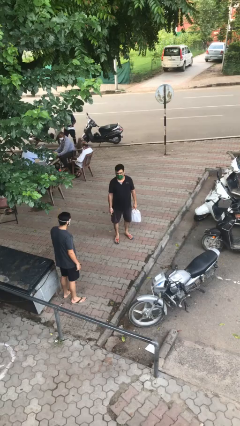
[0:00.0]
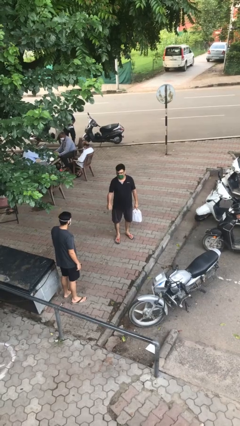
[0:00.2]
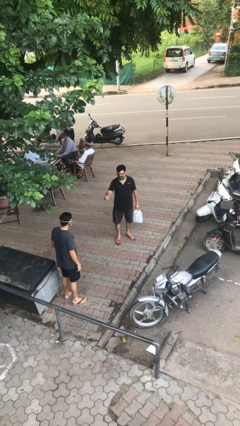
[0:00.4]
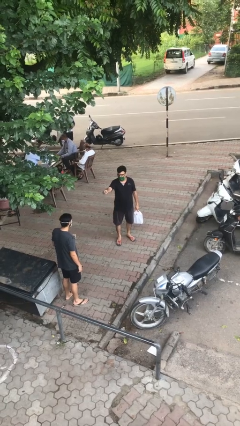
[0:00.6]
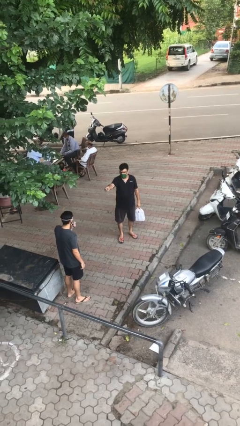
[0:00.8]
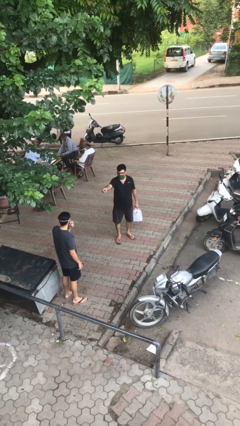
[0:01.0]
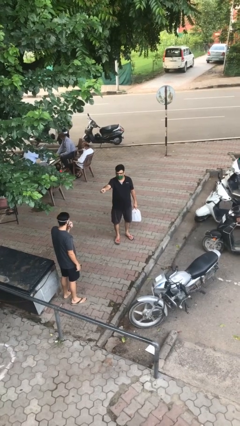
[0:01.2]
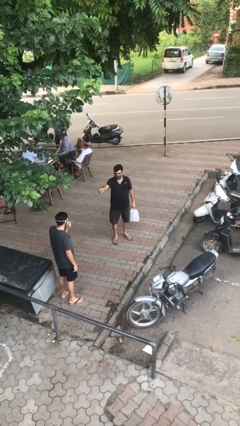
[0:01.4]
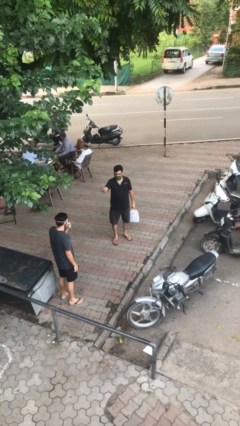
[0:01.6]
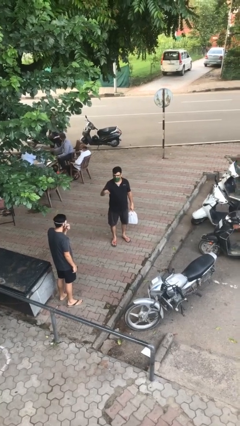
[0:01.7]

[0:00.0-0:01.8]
person points at person

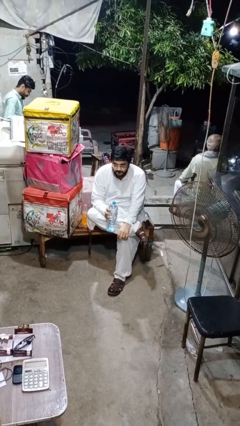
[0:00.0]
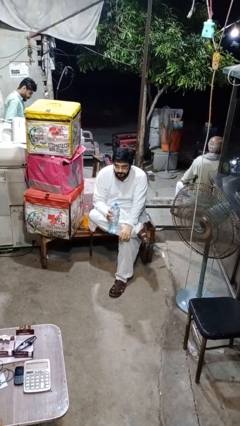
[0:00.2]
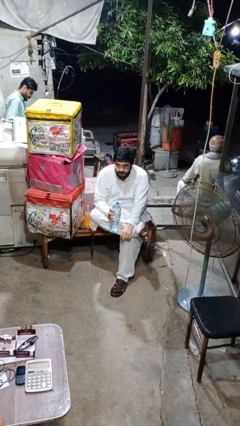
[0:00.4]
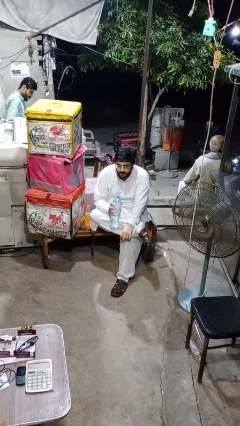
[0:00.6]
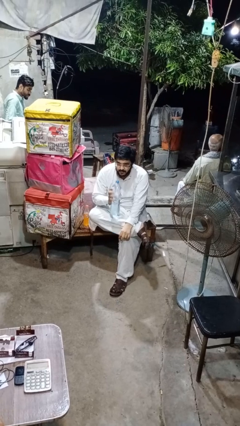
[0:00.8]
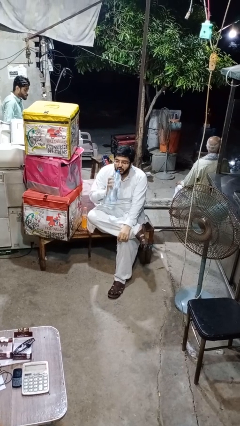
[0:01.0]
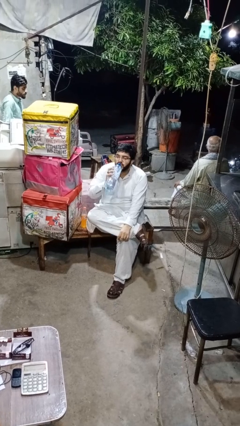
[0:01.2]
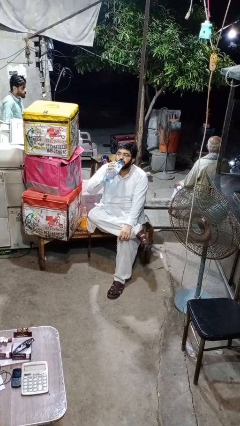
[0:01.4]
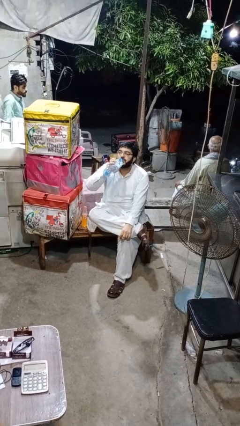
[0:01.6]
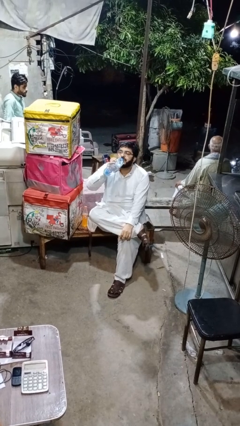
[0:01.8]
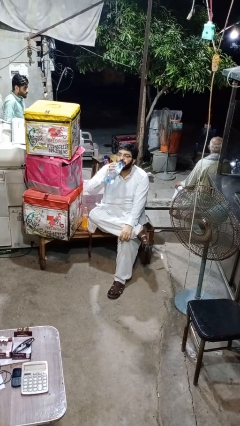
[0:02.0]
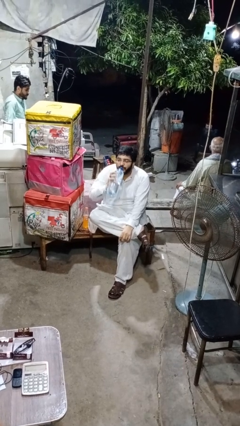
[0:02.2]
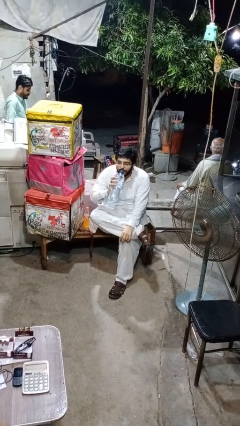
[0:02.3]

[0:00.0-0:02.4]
person drinks from bottle

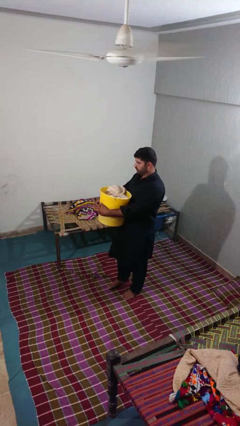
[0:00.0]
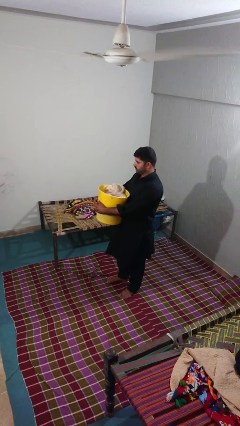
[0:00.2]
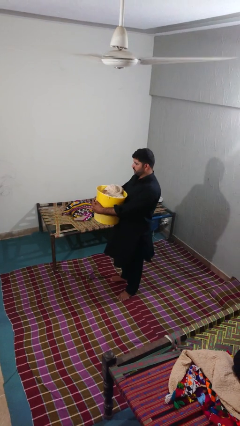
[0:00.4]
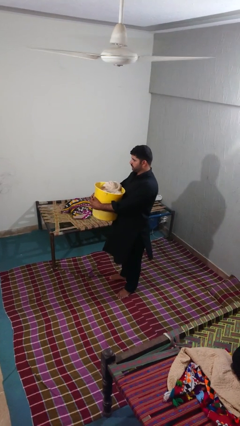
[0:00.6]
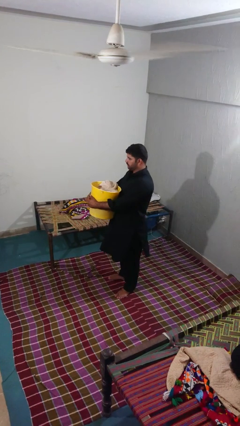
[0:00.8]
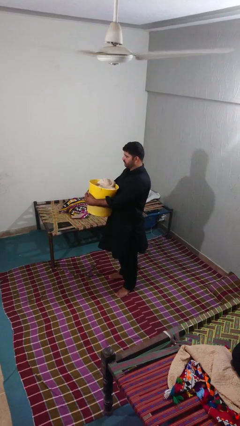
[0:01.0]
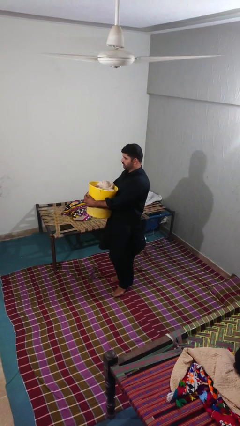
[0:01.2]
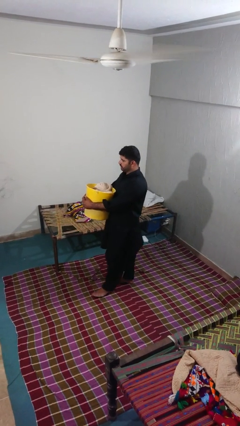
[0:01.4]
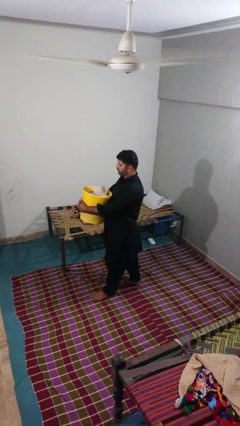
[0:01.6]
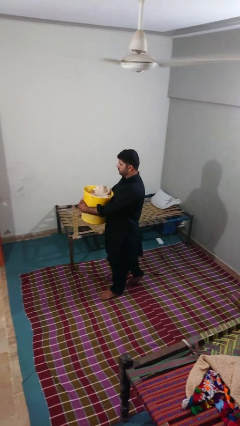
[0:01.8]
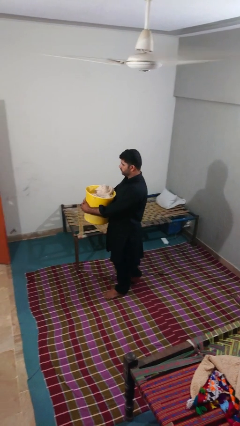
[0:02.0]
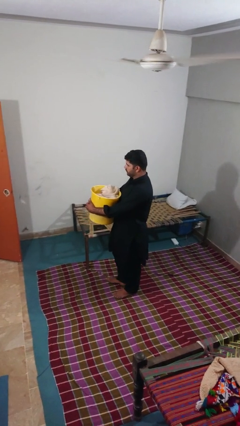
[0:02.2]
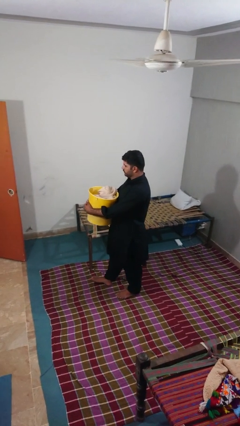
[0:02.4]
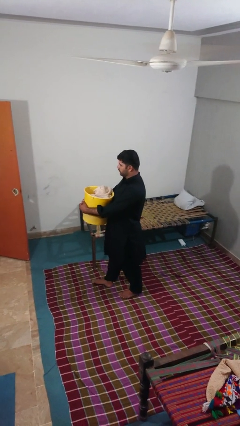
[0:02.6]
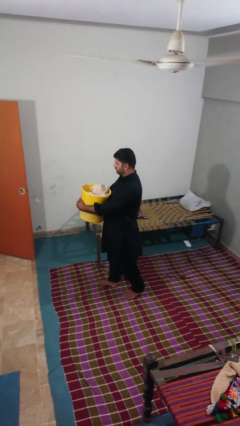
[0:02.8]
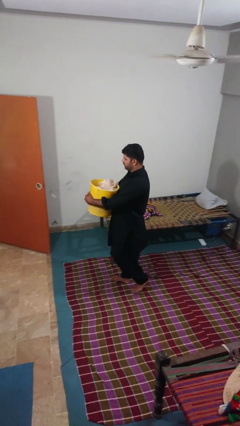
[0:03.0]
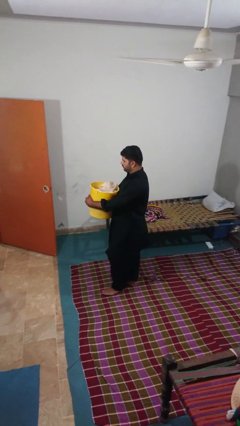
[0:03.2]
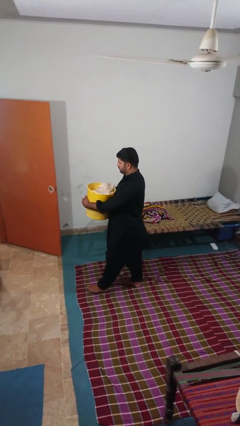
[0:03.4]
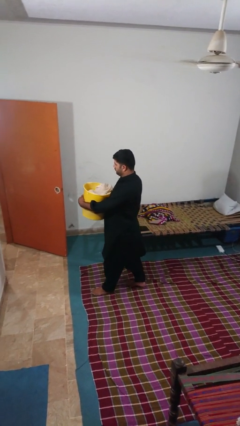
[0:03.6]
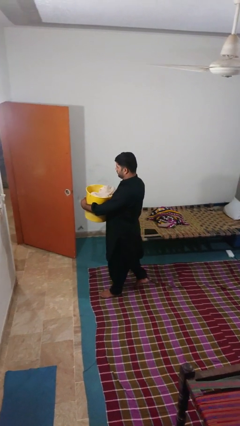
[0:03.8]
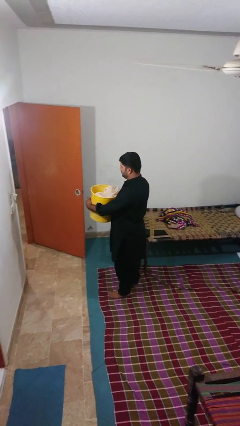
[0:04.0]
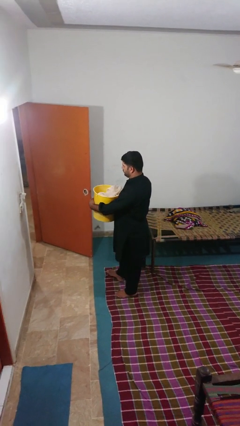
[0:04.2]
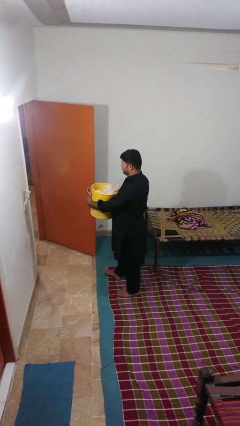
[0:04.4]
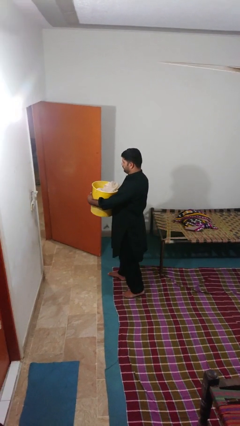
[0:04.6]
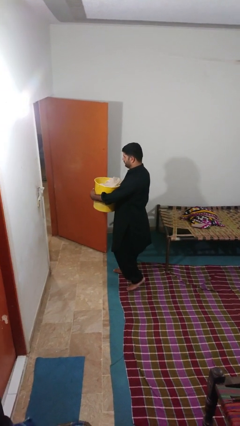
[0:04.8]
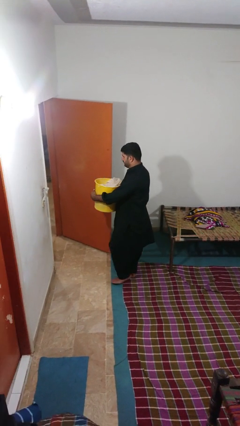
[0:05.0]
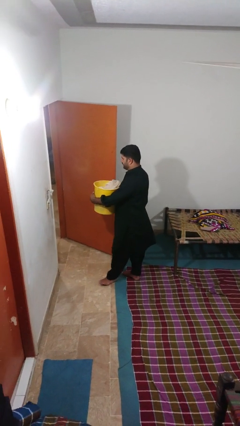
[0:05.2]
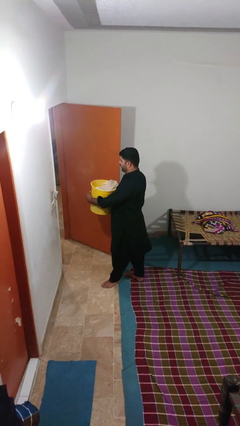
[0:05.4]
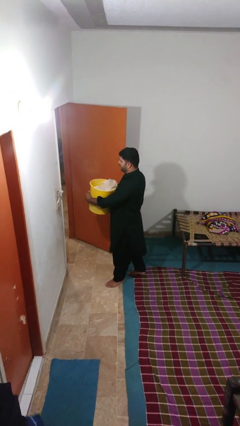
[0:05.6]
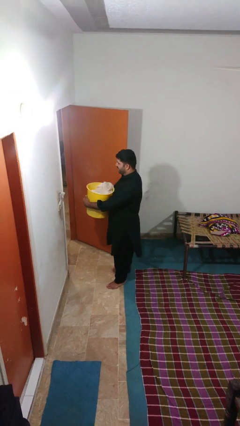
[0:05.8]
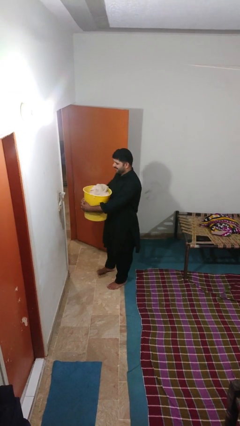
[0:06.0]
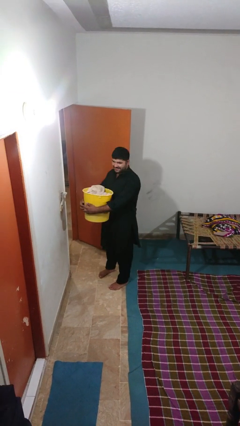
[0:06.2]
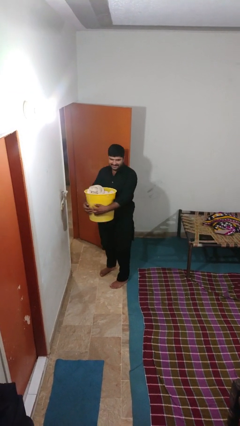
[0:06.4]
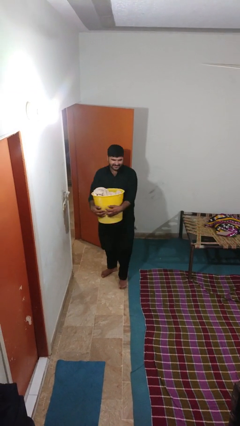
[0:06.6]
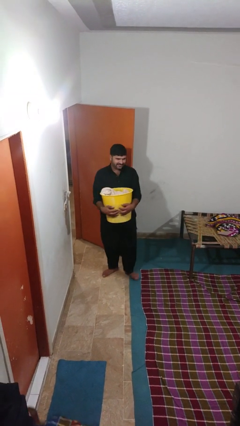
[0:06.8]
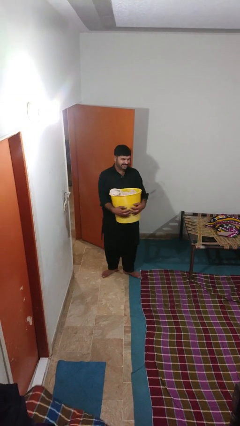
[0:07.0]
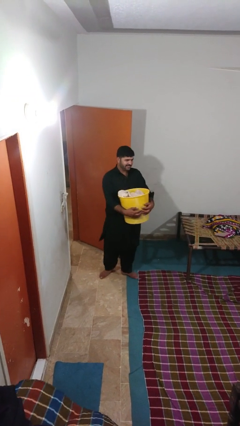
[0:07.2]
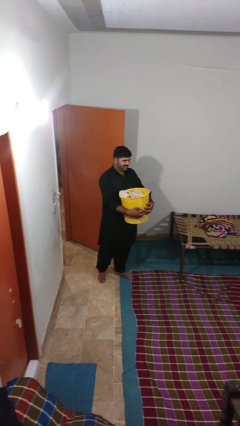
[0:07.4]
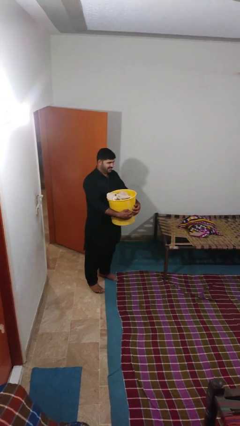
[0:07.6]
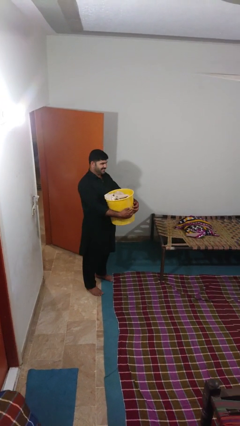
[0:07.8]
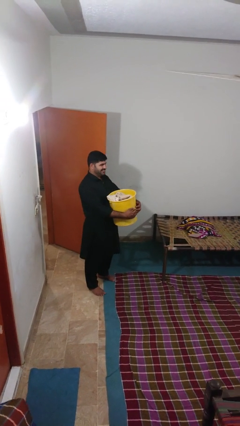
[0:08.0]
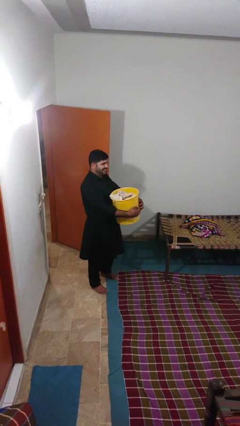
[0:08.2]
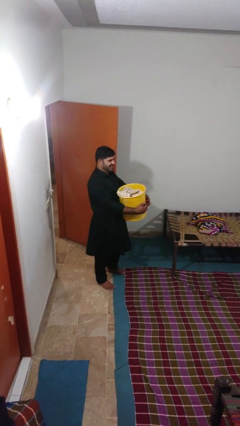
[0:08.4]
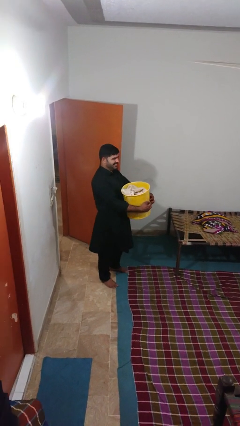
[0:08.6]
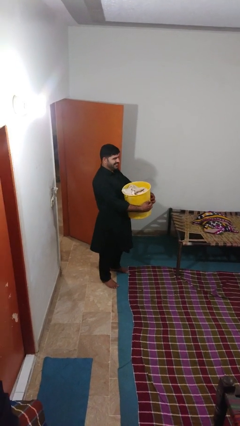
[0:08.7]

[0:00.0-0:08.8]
person carries laundry basket

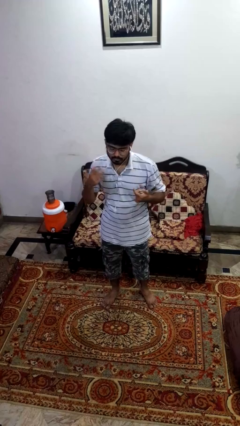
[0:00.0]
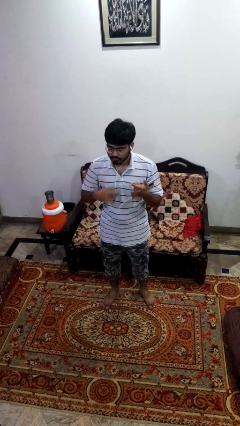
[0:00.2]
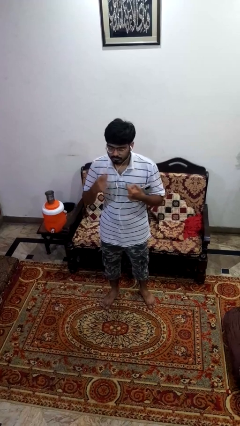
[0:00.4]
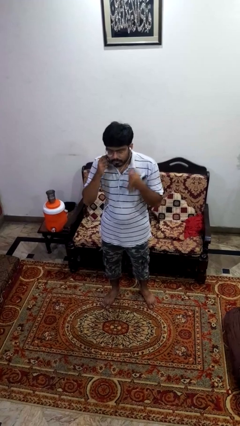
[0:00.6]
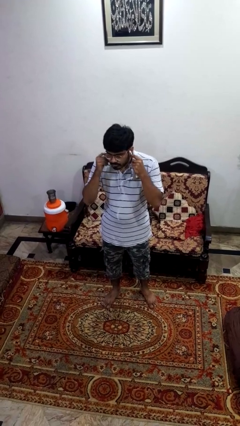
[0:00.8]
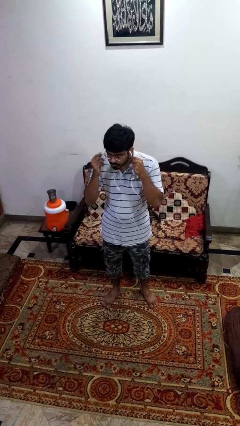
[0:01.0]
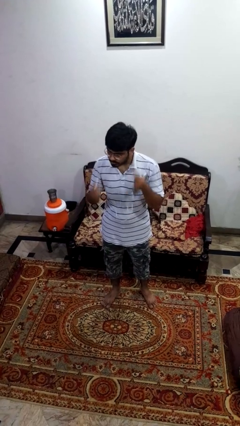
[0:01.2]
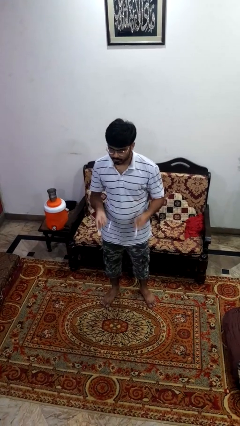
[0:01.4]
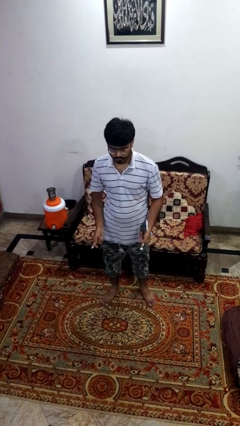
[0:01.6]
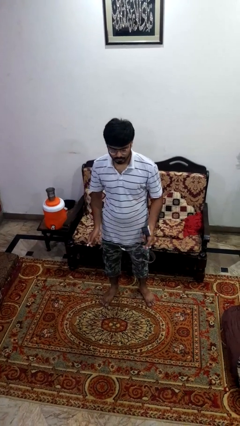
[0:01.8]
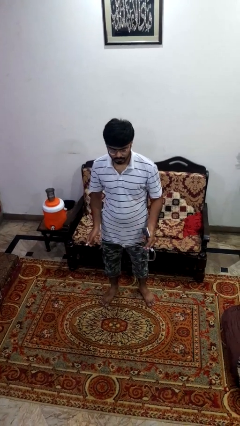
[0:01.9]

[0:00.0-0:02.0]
person takes off headphones

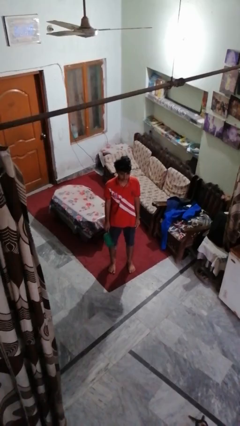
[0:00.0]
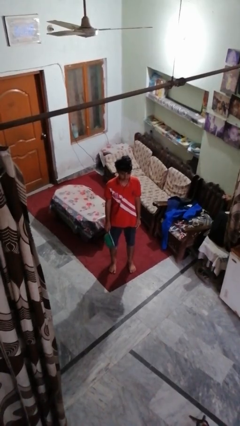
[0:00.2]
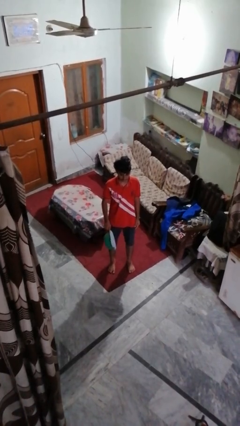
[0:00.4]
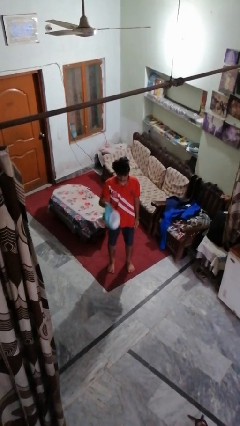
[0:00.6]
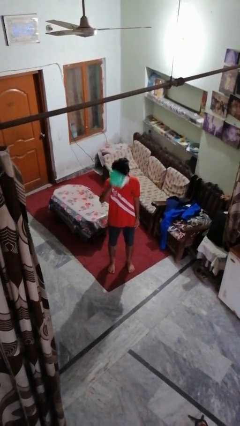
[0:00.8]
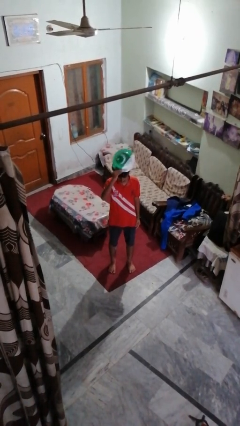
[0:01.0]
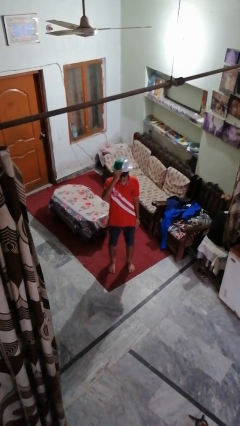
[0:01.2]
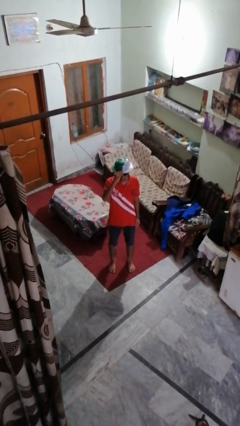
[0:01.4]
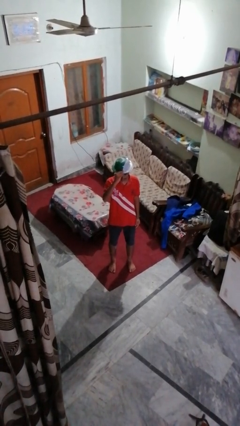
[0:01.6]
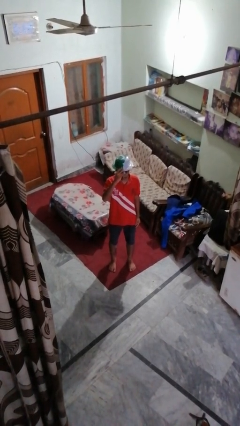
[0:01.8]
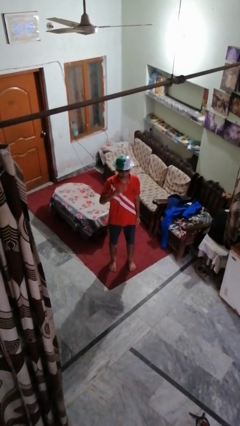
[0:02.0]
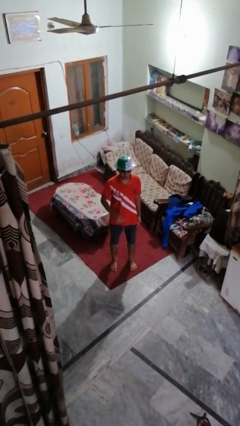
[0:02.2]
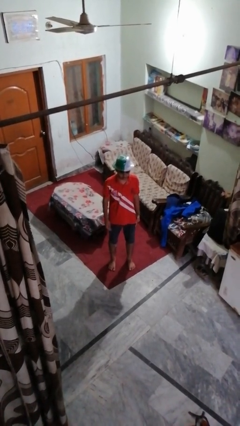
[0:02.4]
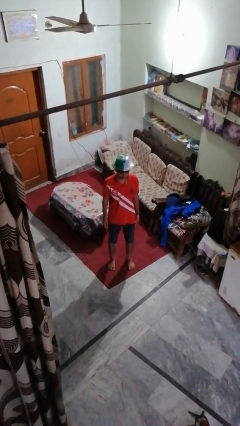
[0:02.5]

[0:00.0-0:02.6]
person puts on hat
